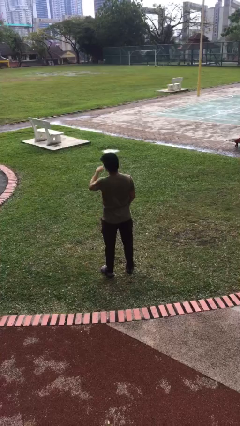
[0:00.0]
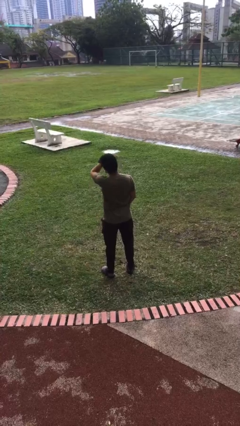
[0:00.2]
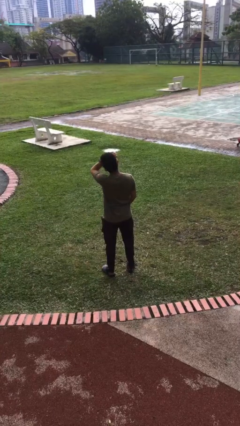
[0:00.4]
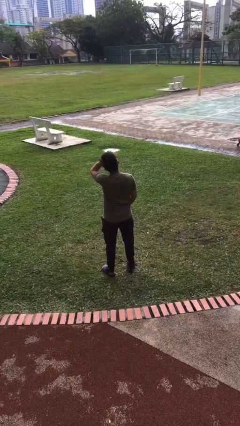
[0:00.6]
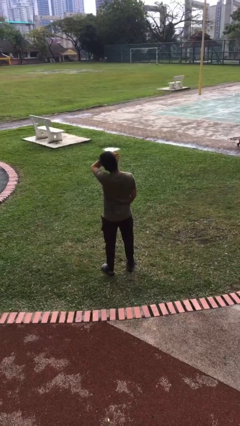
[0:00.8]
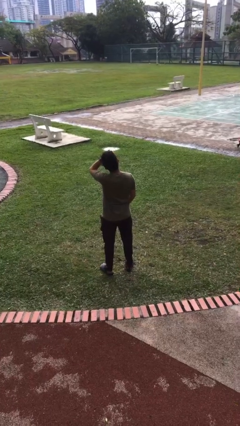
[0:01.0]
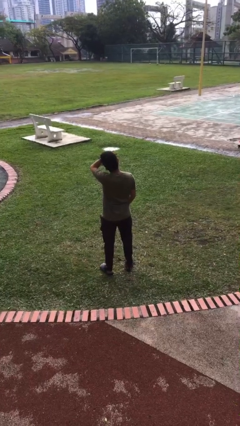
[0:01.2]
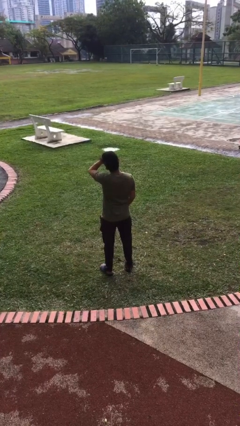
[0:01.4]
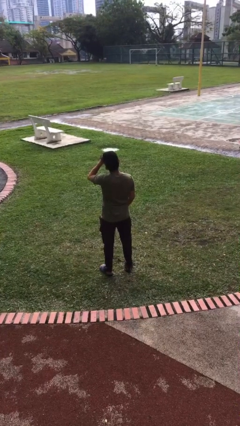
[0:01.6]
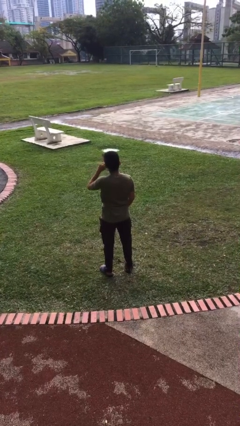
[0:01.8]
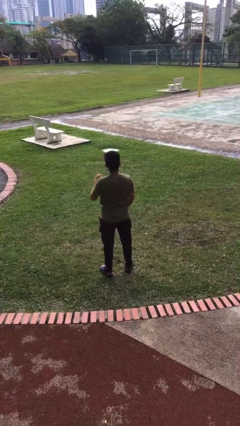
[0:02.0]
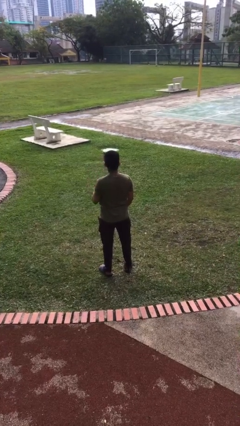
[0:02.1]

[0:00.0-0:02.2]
person rubs eyes

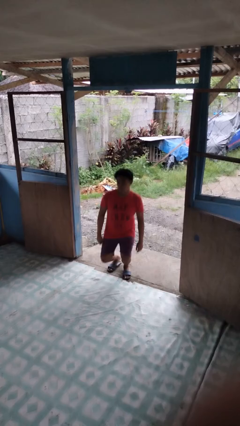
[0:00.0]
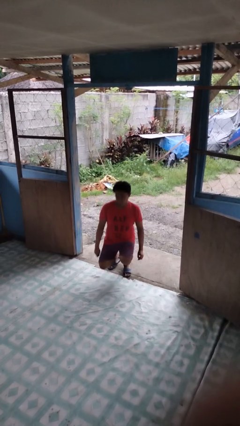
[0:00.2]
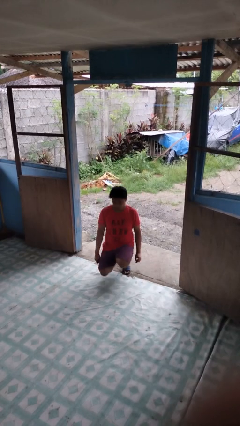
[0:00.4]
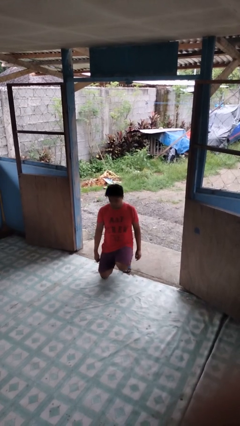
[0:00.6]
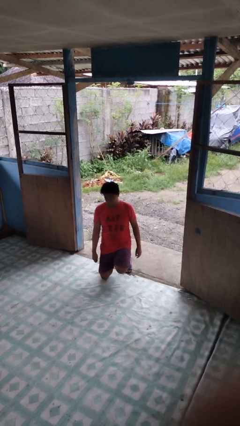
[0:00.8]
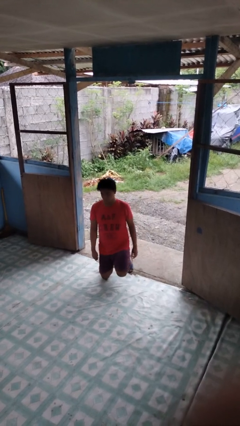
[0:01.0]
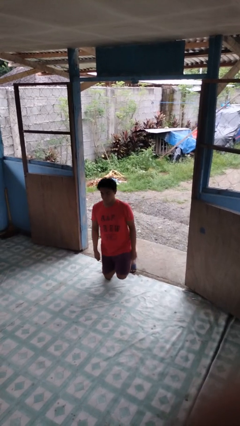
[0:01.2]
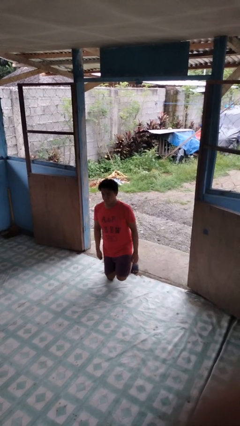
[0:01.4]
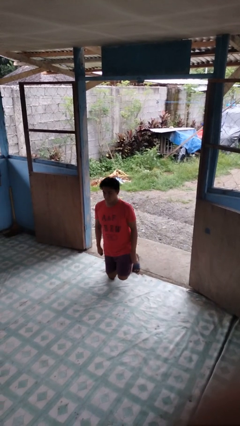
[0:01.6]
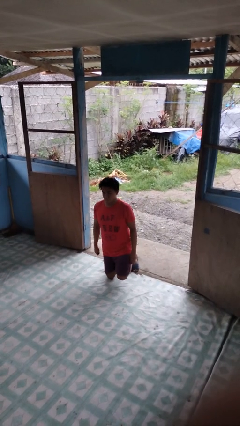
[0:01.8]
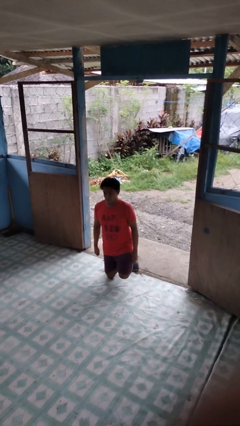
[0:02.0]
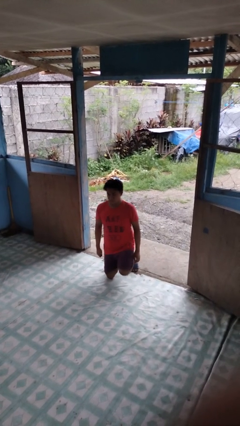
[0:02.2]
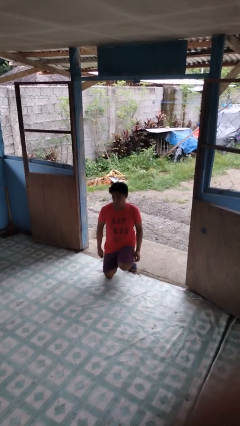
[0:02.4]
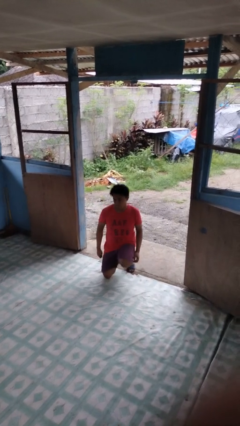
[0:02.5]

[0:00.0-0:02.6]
person kneels

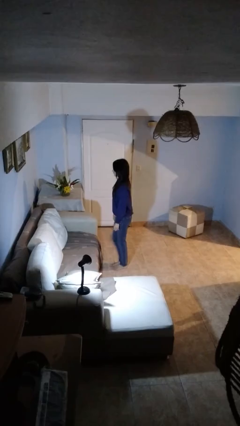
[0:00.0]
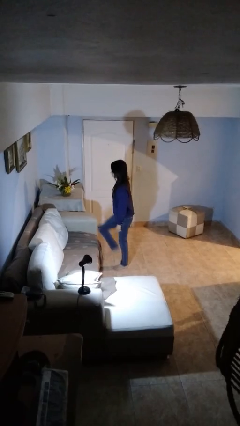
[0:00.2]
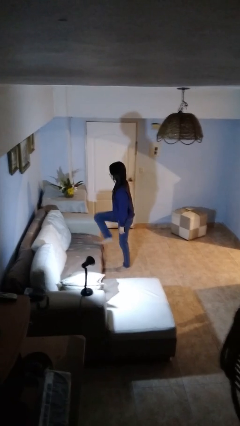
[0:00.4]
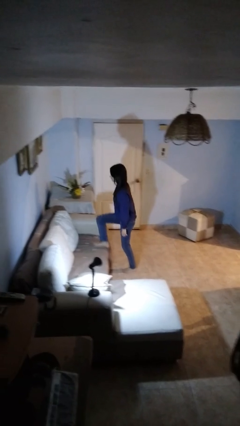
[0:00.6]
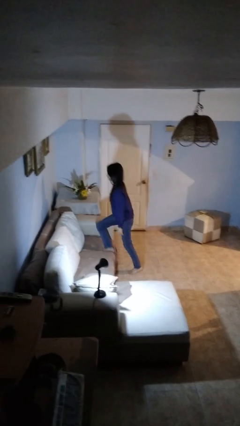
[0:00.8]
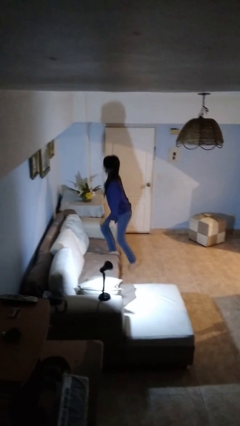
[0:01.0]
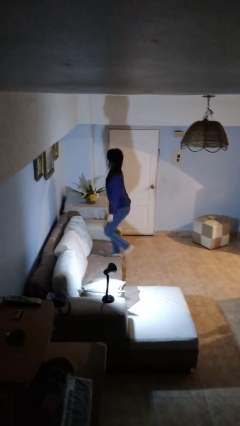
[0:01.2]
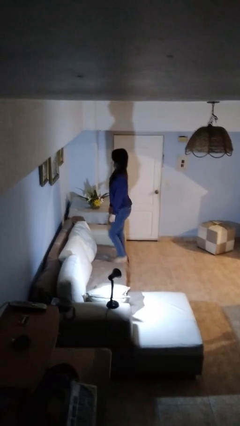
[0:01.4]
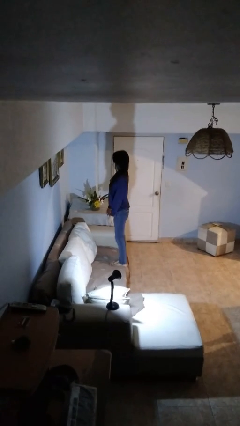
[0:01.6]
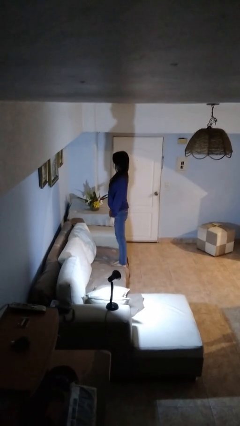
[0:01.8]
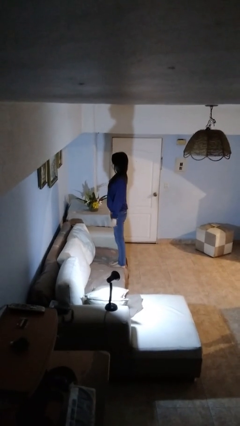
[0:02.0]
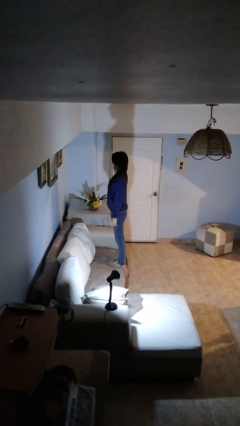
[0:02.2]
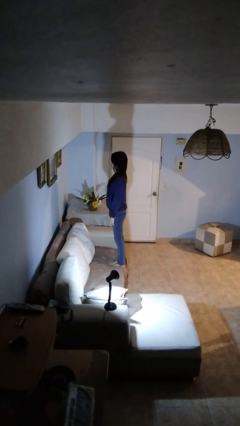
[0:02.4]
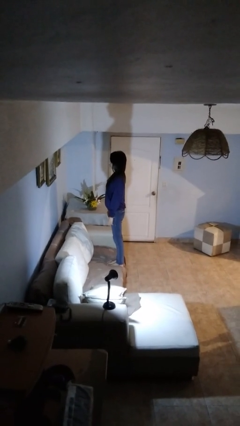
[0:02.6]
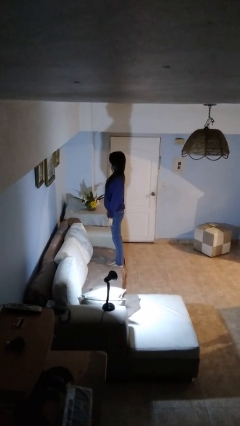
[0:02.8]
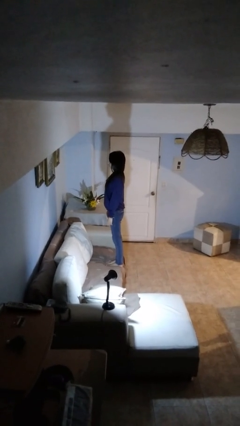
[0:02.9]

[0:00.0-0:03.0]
person climbs on couch

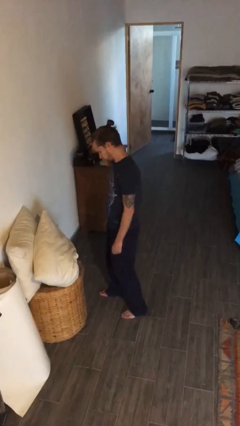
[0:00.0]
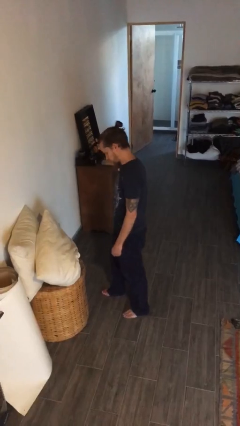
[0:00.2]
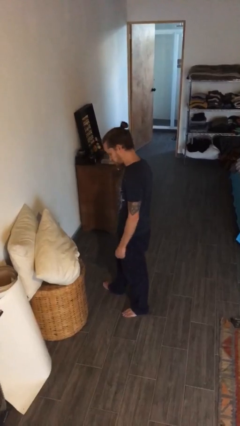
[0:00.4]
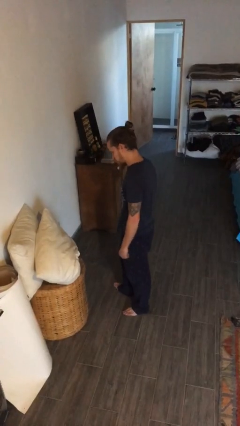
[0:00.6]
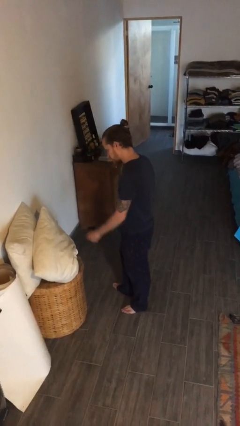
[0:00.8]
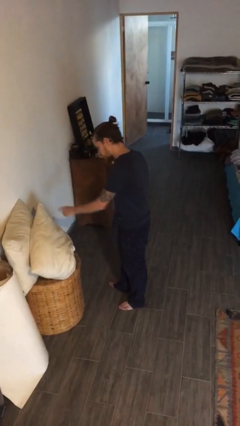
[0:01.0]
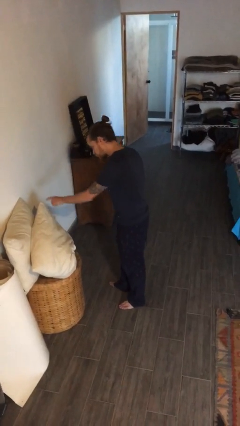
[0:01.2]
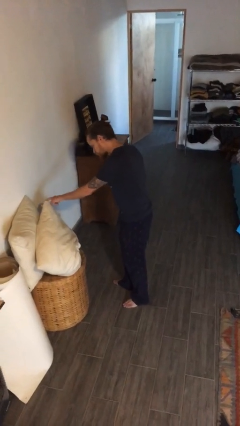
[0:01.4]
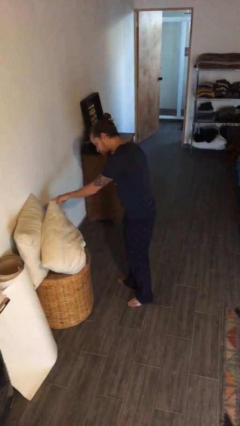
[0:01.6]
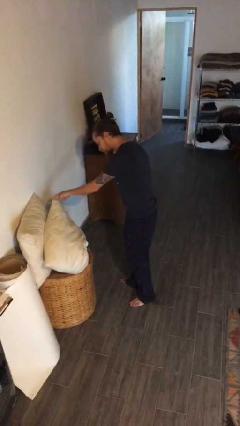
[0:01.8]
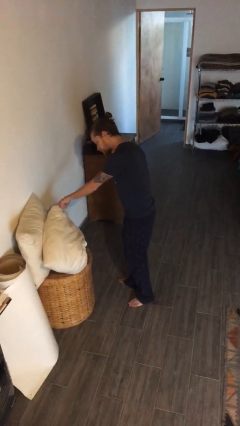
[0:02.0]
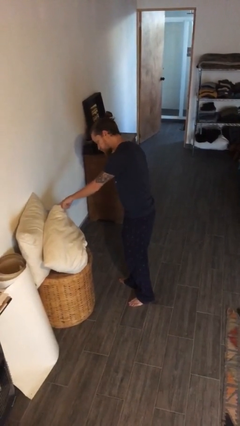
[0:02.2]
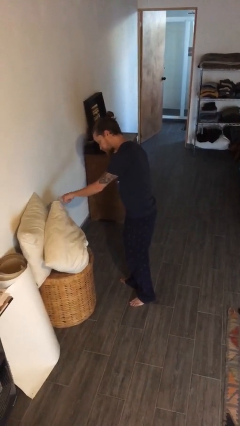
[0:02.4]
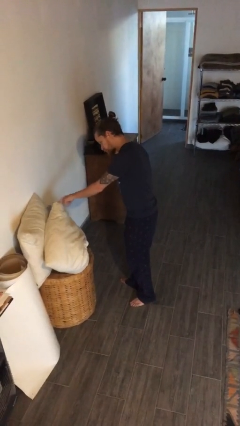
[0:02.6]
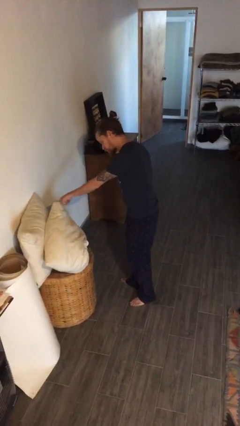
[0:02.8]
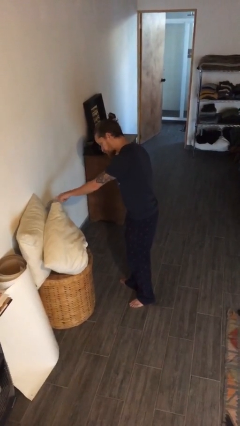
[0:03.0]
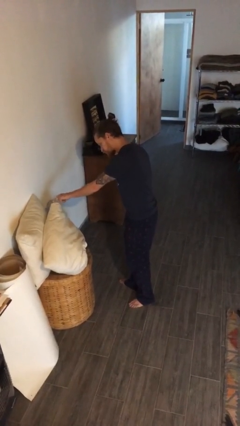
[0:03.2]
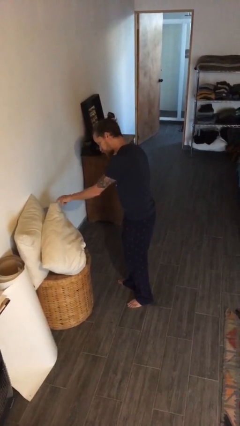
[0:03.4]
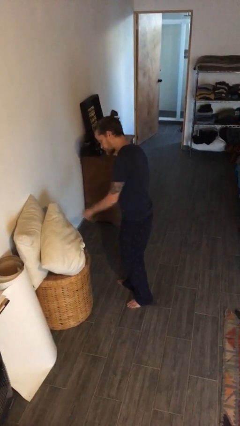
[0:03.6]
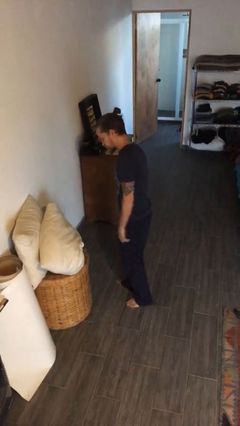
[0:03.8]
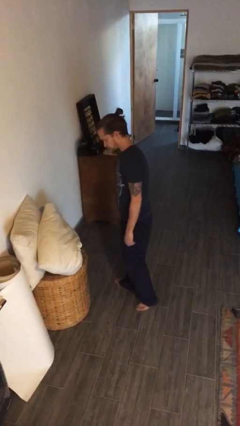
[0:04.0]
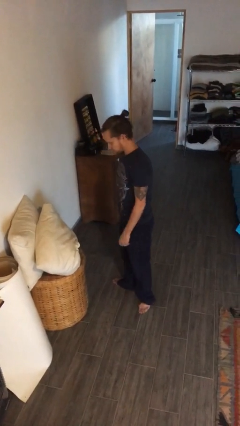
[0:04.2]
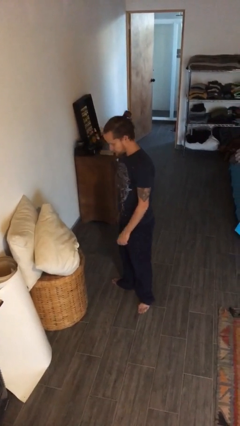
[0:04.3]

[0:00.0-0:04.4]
person taps object with finger

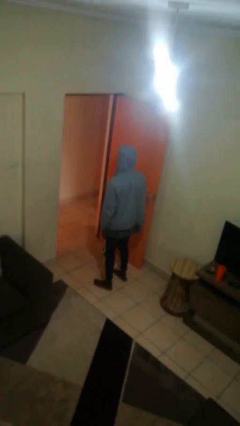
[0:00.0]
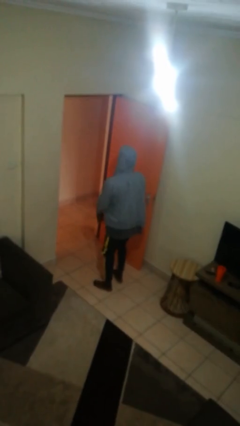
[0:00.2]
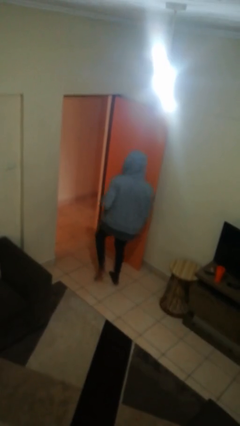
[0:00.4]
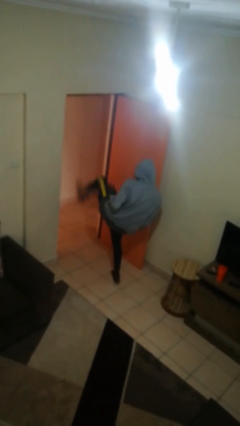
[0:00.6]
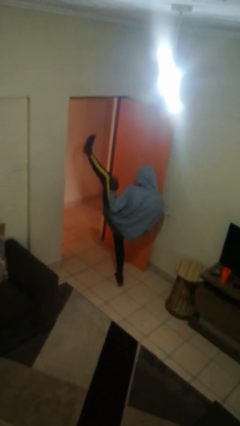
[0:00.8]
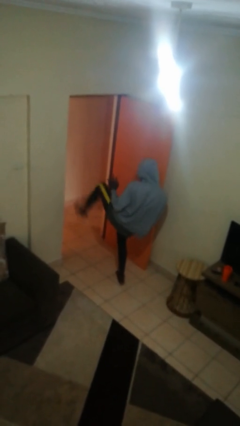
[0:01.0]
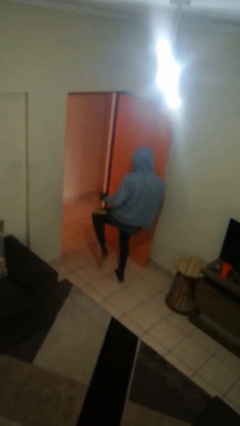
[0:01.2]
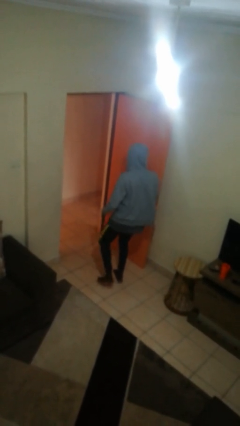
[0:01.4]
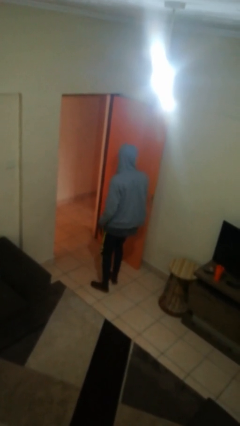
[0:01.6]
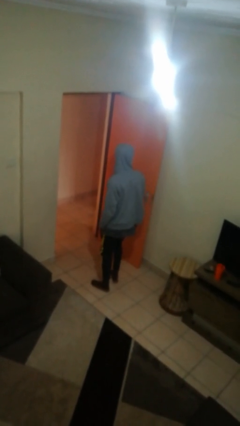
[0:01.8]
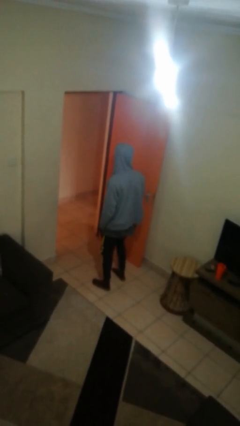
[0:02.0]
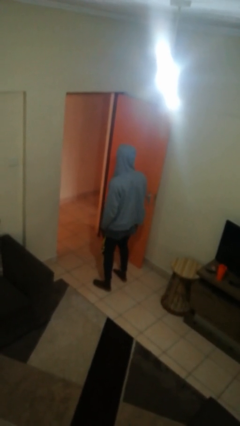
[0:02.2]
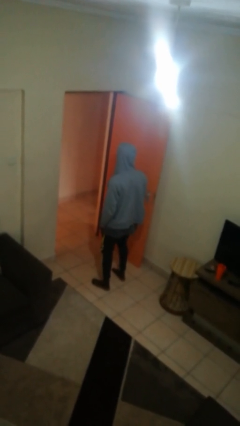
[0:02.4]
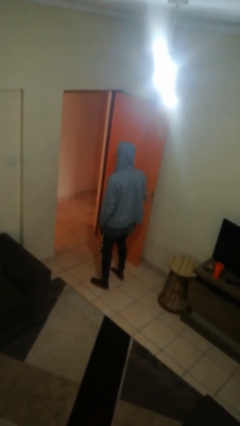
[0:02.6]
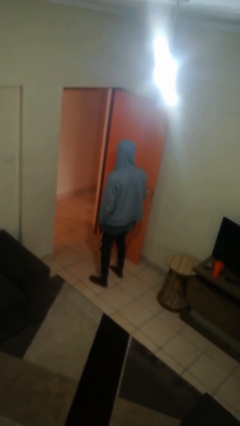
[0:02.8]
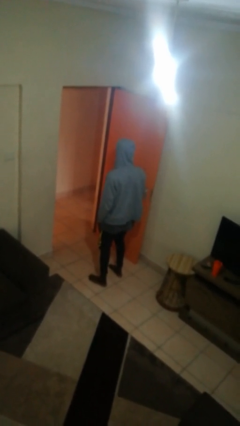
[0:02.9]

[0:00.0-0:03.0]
person karate kicks

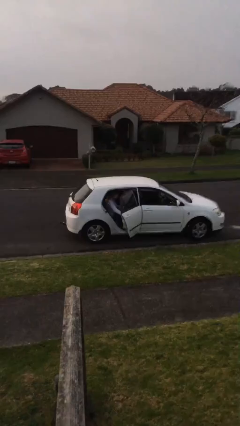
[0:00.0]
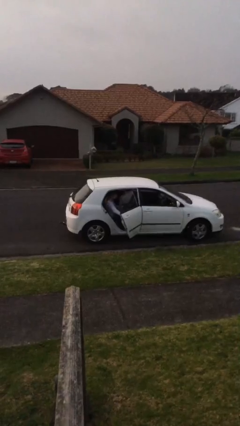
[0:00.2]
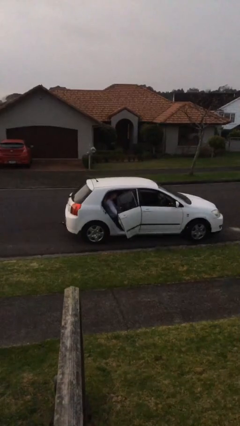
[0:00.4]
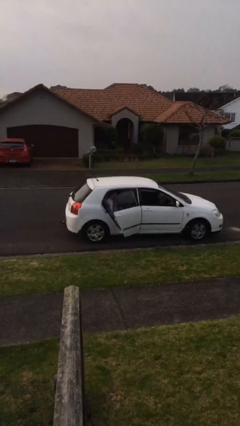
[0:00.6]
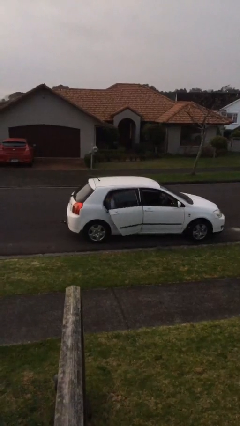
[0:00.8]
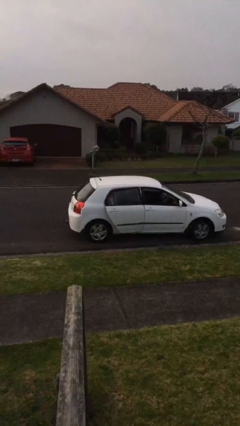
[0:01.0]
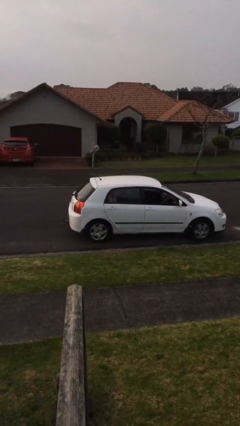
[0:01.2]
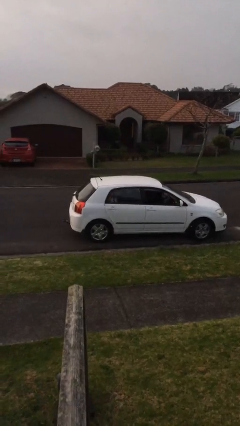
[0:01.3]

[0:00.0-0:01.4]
person closes car door

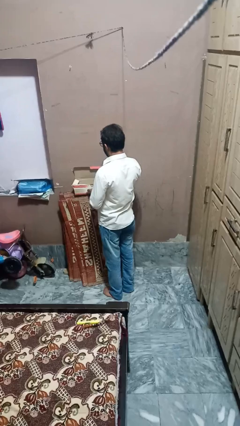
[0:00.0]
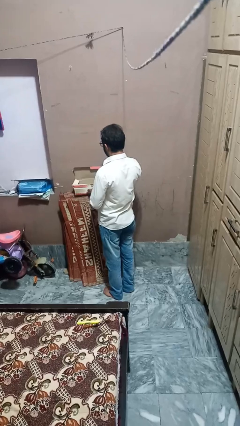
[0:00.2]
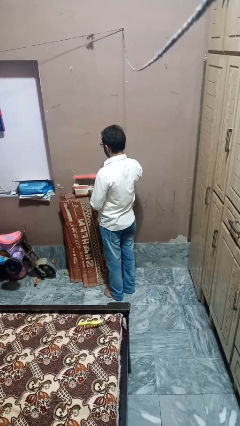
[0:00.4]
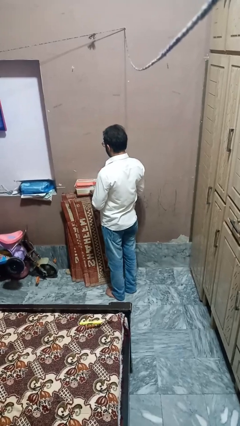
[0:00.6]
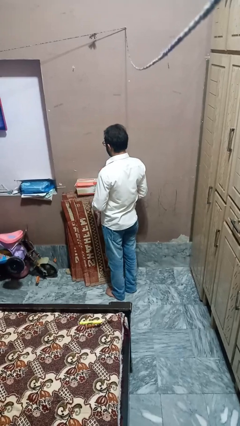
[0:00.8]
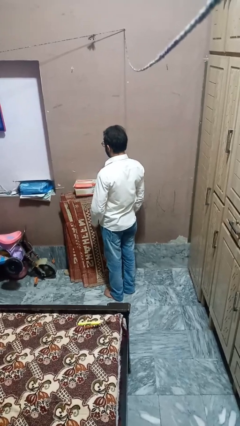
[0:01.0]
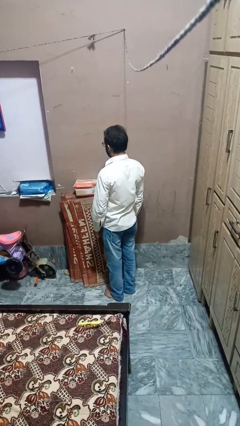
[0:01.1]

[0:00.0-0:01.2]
person closes mailbox
